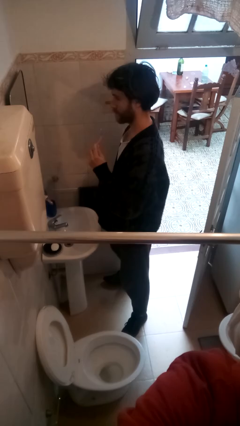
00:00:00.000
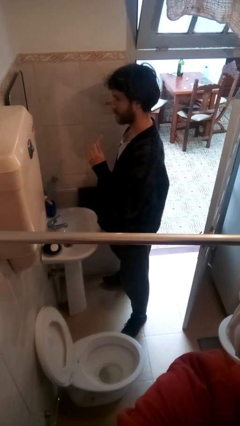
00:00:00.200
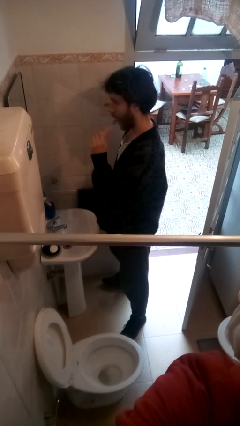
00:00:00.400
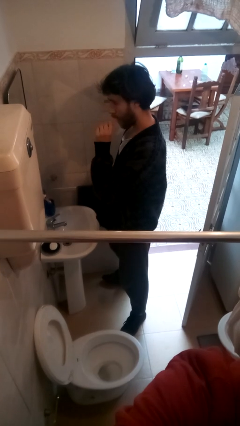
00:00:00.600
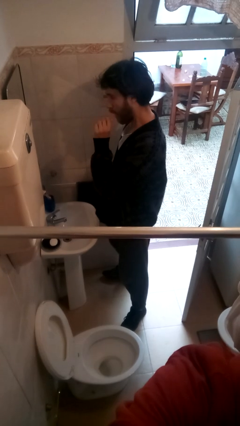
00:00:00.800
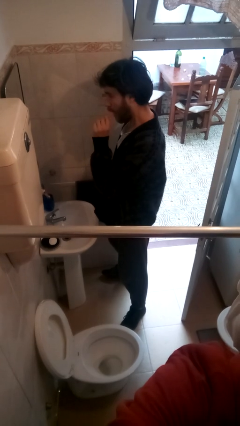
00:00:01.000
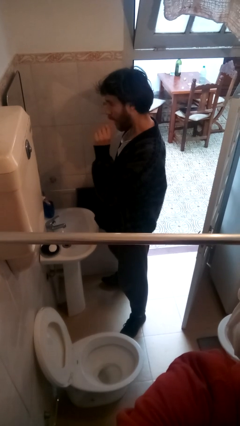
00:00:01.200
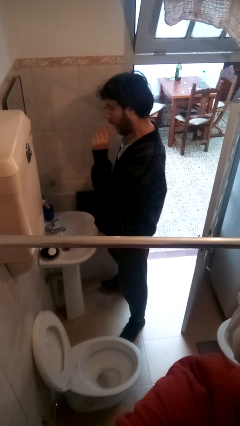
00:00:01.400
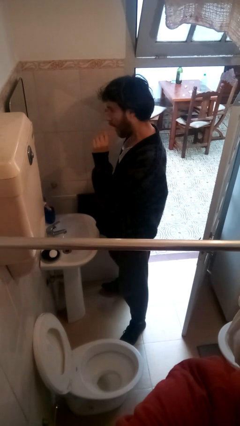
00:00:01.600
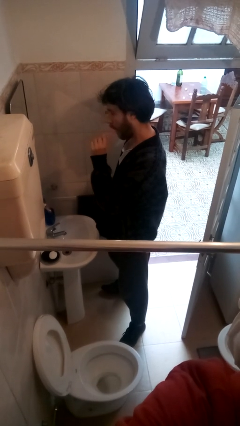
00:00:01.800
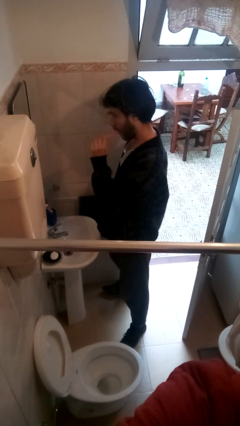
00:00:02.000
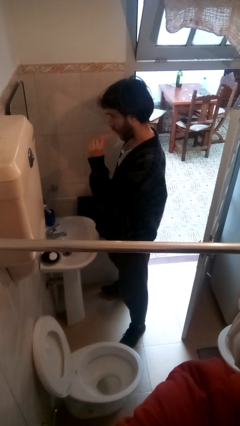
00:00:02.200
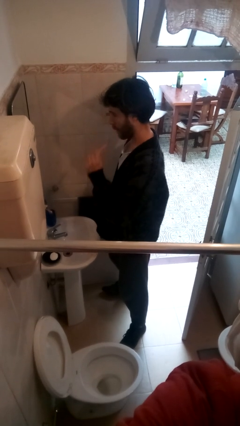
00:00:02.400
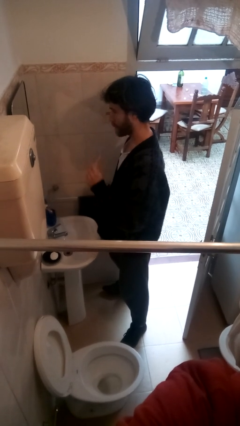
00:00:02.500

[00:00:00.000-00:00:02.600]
person brushes teeth

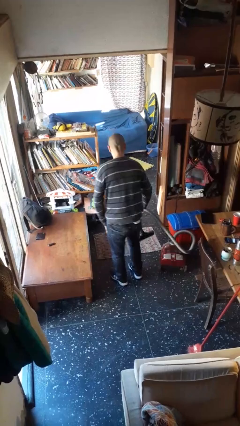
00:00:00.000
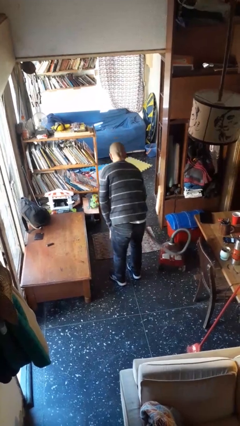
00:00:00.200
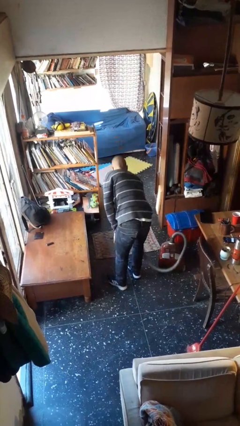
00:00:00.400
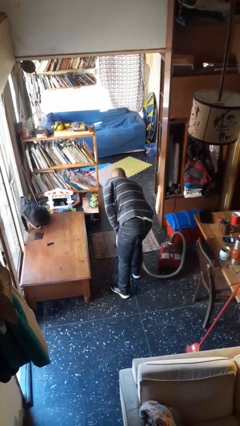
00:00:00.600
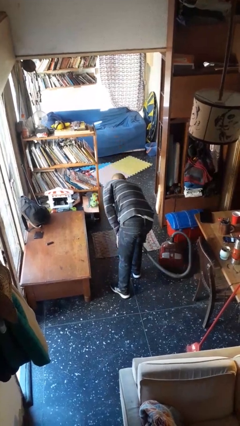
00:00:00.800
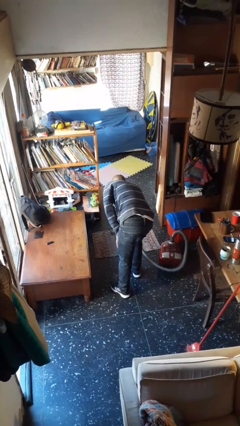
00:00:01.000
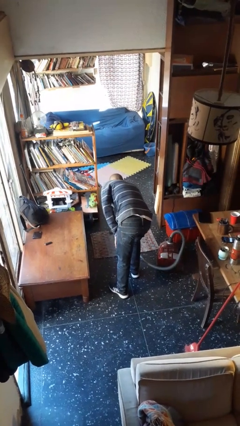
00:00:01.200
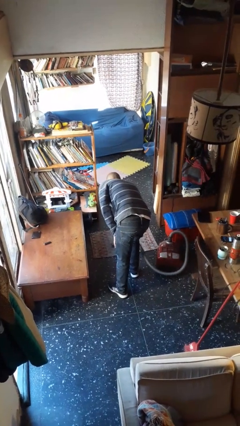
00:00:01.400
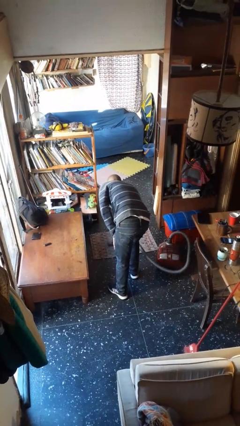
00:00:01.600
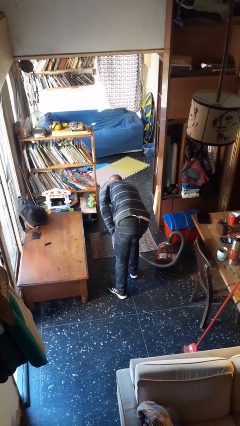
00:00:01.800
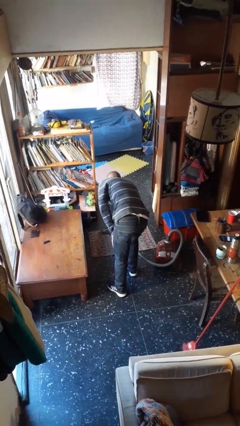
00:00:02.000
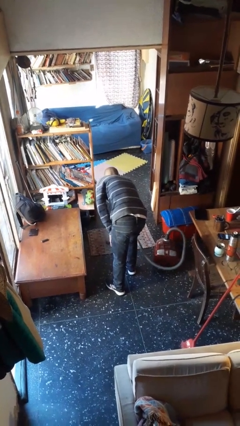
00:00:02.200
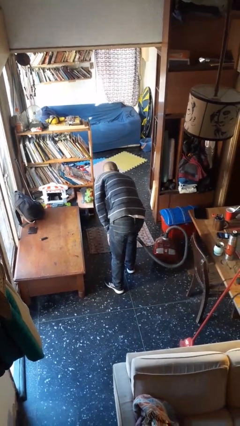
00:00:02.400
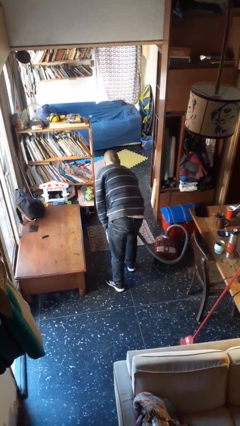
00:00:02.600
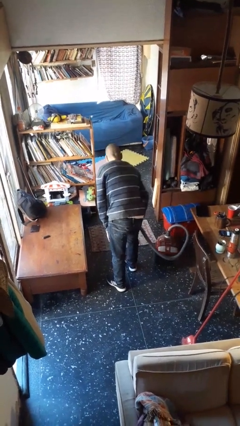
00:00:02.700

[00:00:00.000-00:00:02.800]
person vacuums carpet

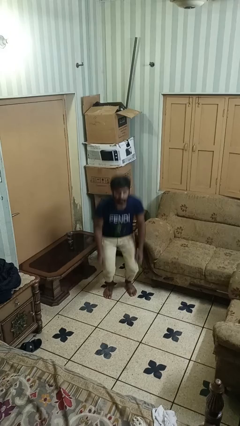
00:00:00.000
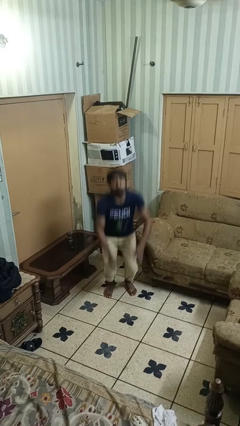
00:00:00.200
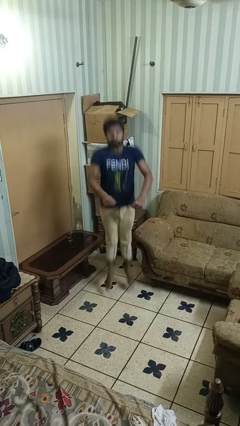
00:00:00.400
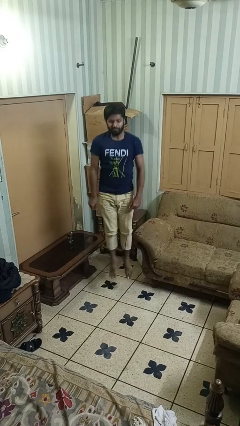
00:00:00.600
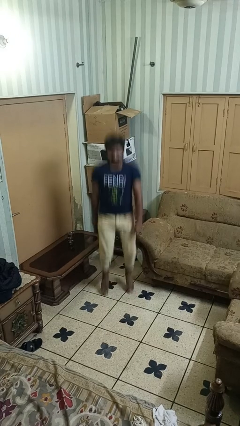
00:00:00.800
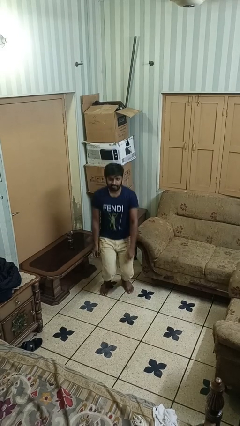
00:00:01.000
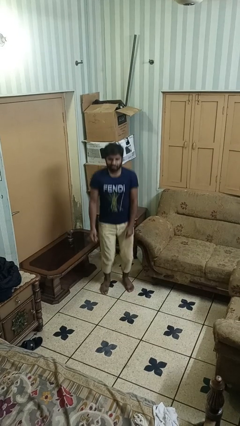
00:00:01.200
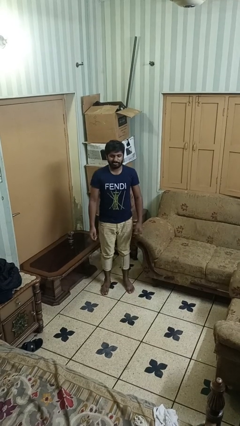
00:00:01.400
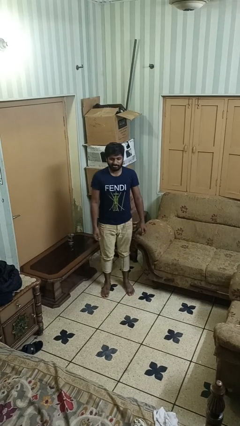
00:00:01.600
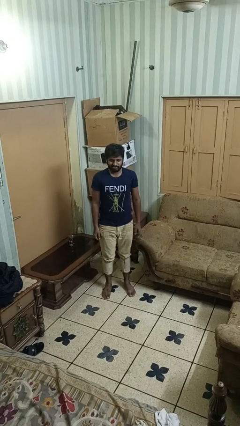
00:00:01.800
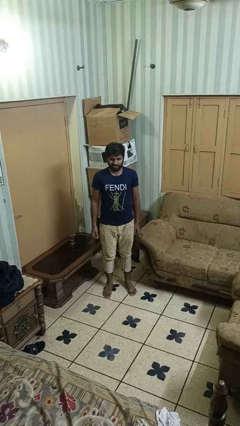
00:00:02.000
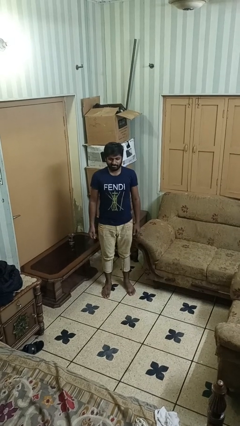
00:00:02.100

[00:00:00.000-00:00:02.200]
person jumps

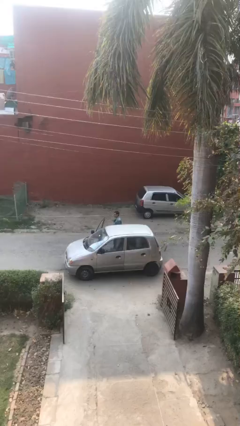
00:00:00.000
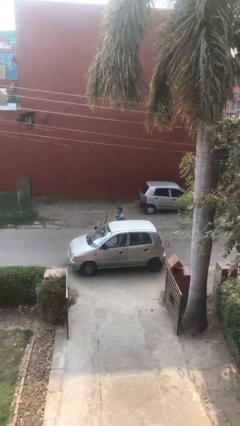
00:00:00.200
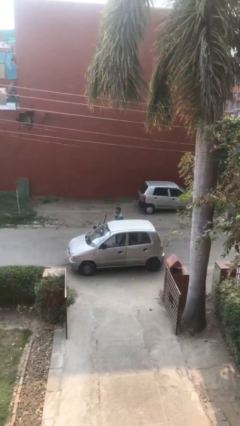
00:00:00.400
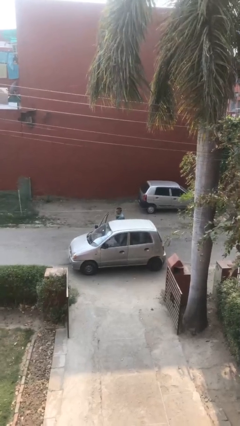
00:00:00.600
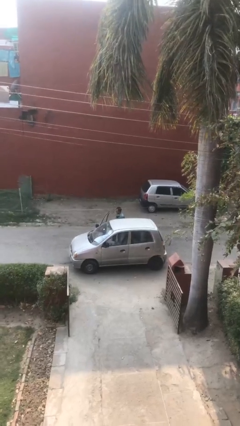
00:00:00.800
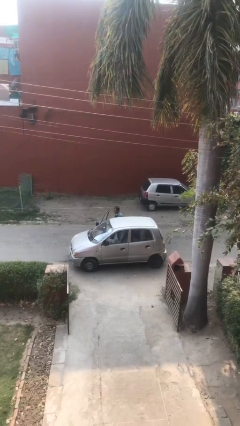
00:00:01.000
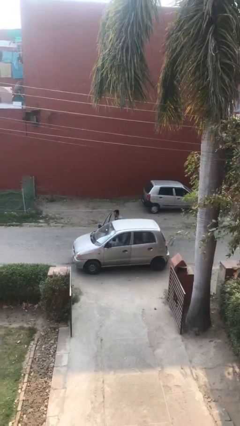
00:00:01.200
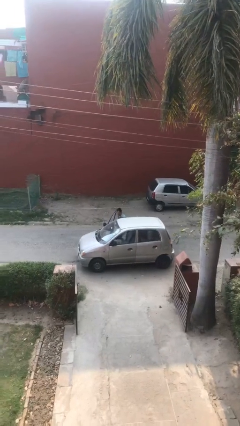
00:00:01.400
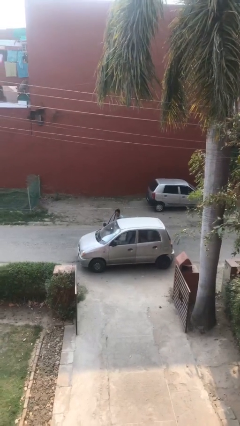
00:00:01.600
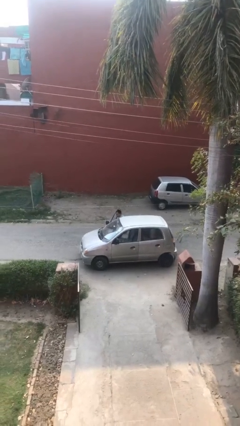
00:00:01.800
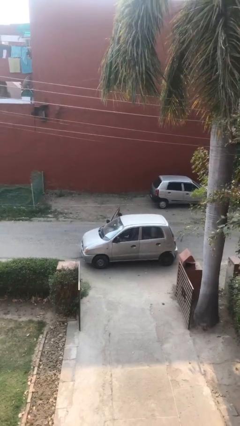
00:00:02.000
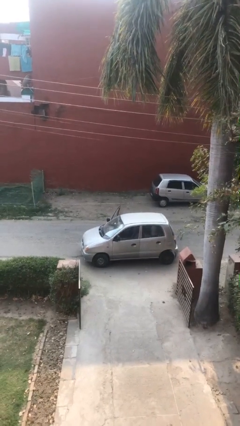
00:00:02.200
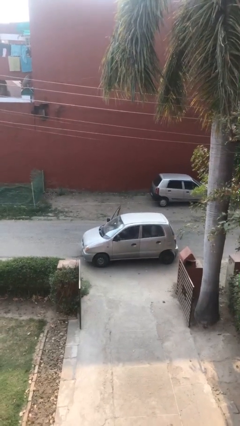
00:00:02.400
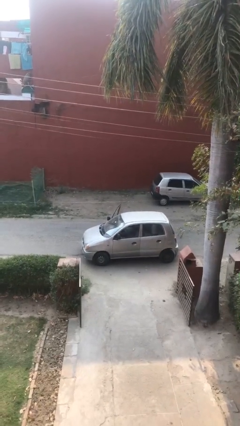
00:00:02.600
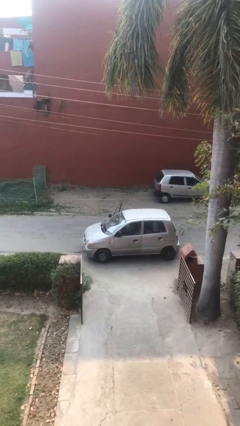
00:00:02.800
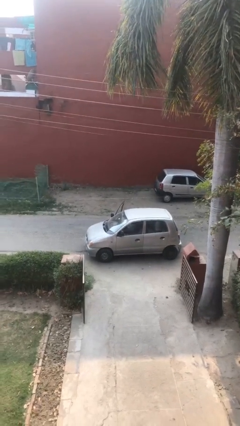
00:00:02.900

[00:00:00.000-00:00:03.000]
person enters car

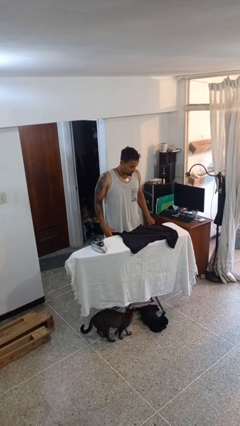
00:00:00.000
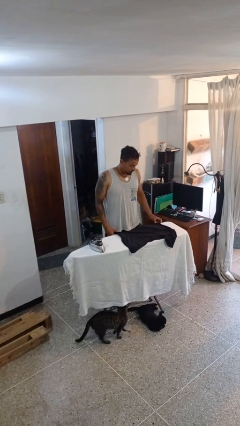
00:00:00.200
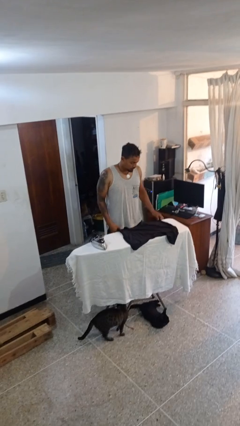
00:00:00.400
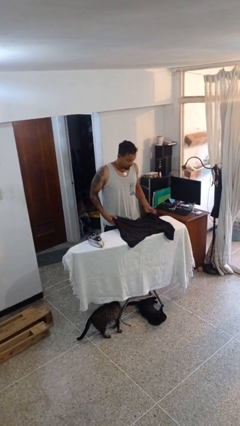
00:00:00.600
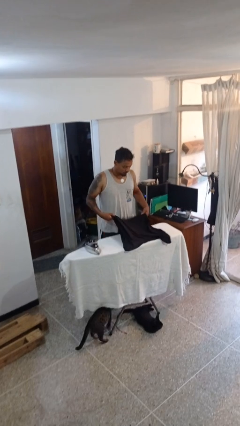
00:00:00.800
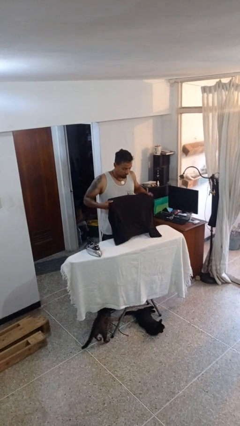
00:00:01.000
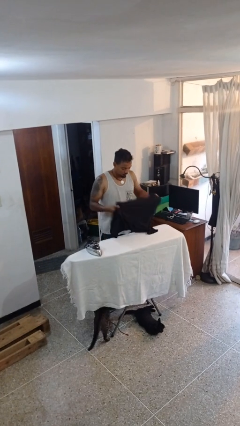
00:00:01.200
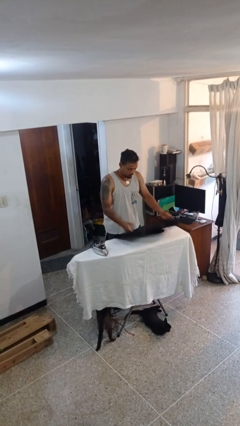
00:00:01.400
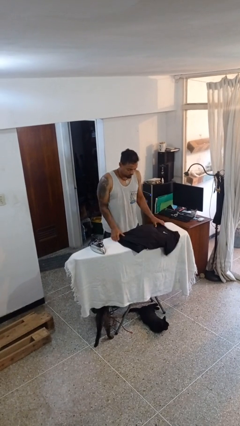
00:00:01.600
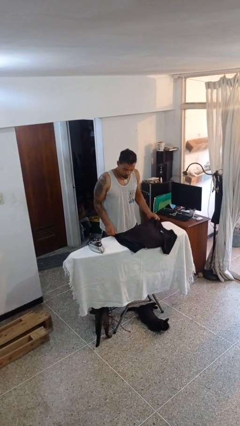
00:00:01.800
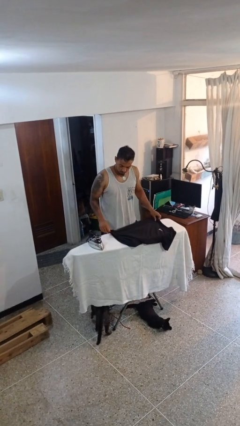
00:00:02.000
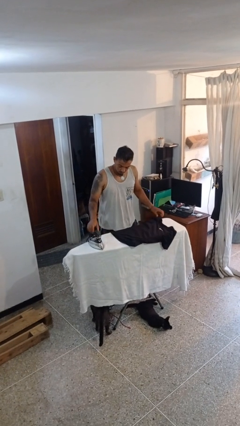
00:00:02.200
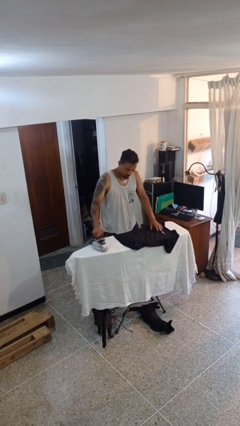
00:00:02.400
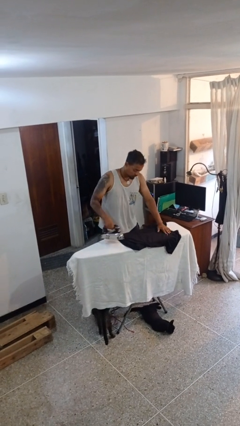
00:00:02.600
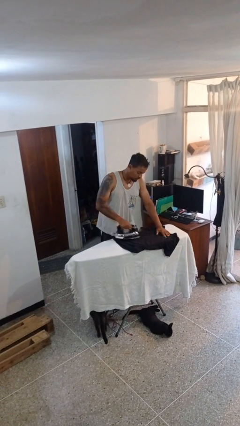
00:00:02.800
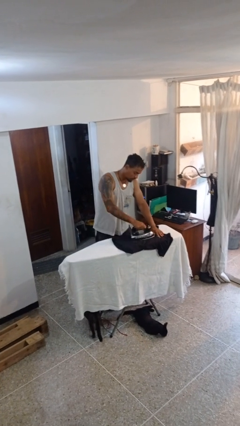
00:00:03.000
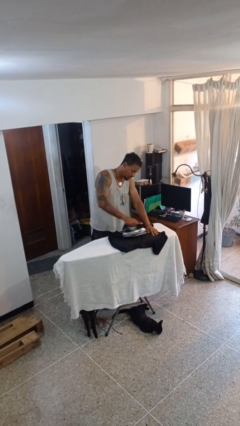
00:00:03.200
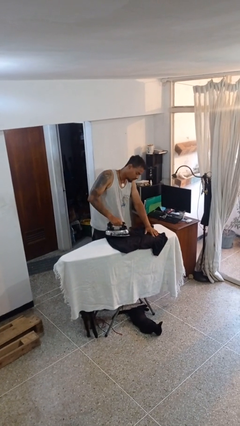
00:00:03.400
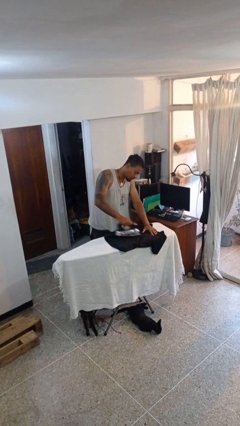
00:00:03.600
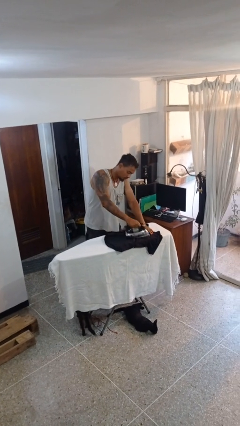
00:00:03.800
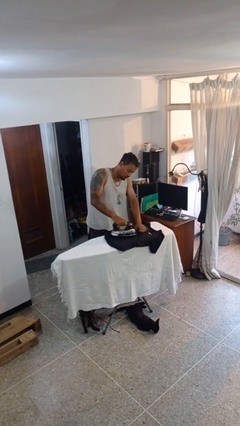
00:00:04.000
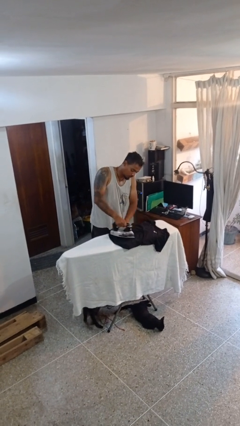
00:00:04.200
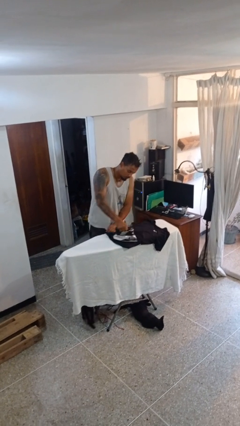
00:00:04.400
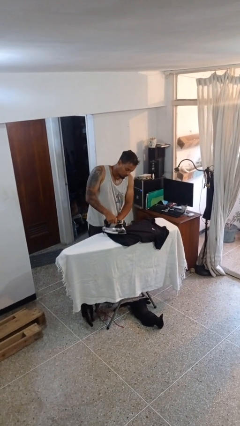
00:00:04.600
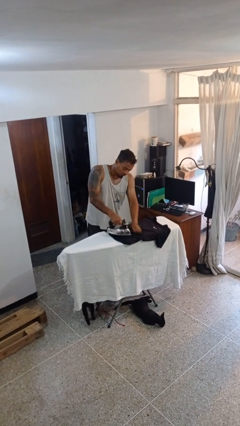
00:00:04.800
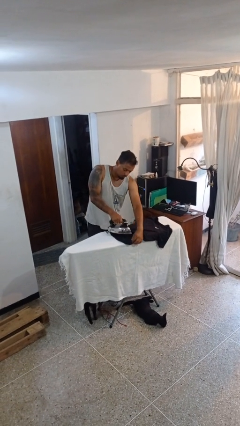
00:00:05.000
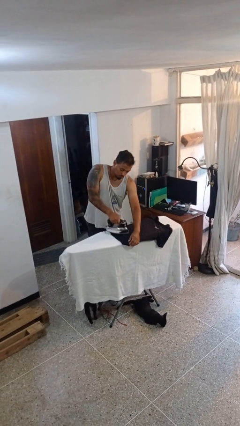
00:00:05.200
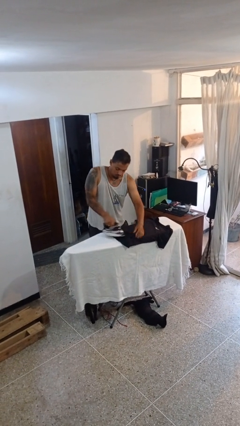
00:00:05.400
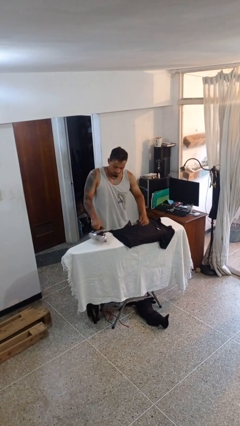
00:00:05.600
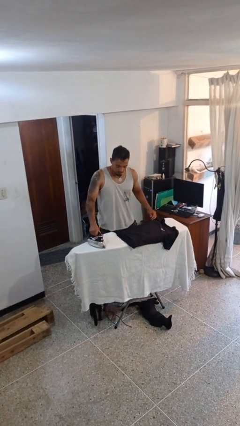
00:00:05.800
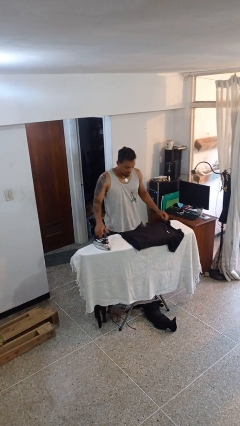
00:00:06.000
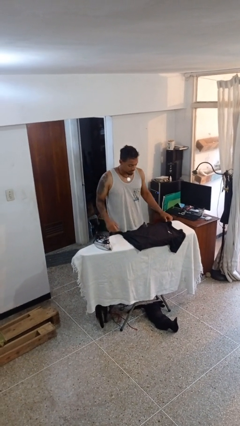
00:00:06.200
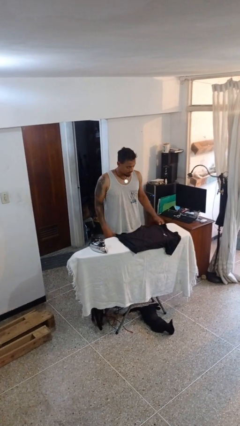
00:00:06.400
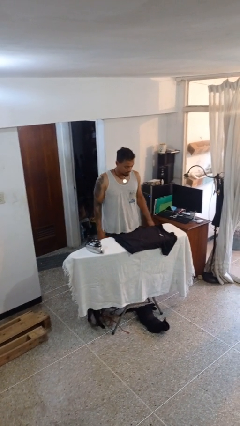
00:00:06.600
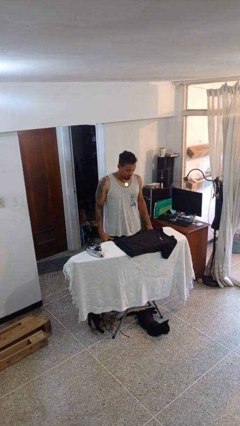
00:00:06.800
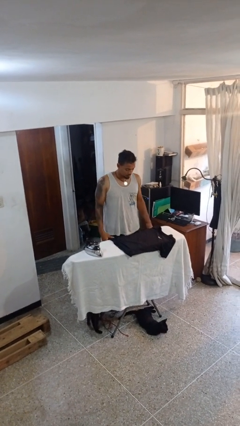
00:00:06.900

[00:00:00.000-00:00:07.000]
person irons clothes
